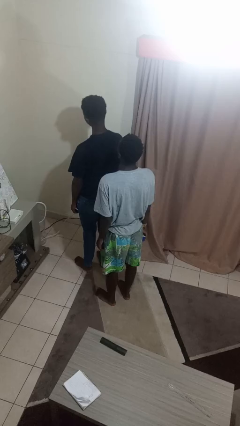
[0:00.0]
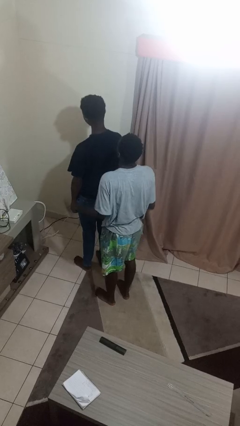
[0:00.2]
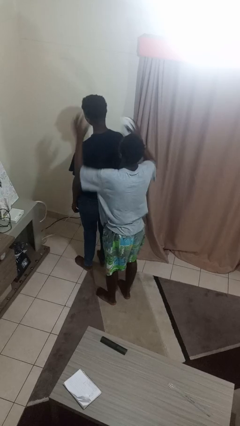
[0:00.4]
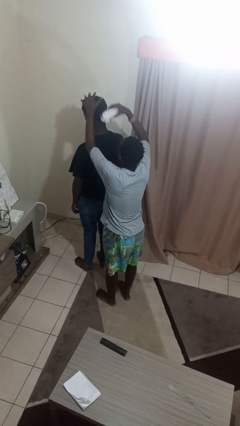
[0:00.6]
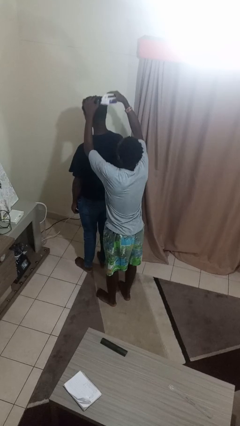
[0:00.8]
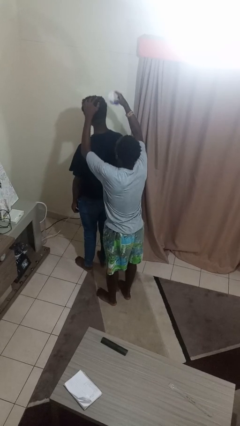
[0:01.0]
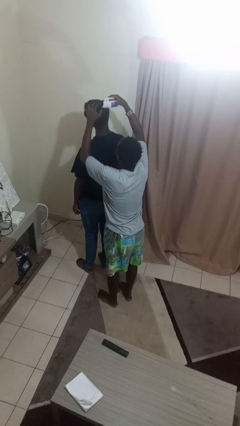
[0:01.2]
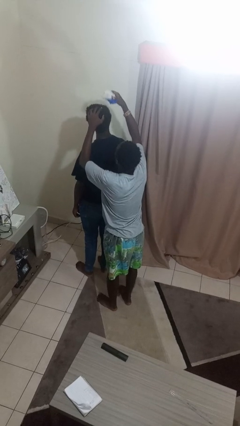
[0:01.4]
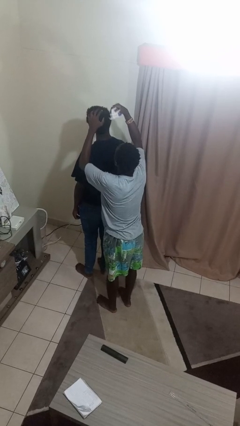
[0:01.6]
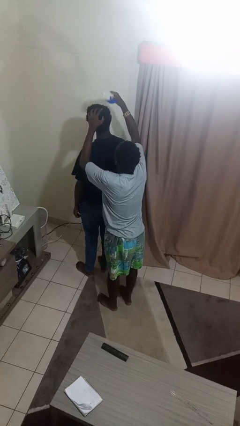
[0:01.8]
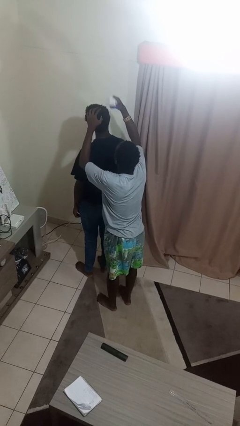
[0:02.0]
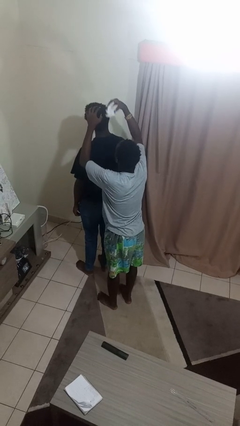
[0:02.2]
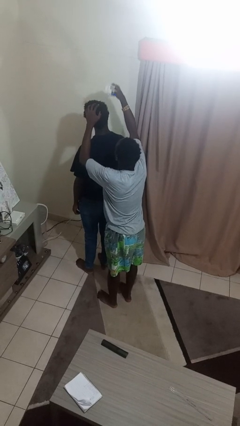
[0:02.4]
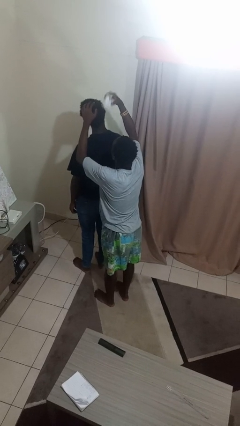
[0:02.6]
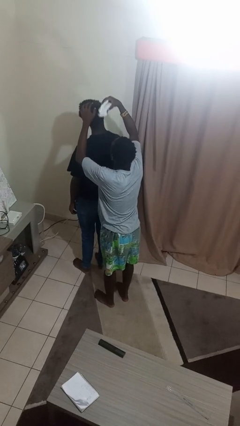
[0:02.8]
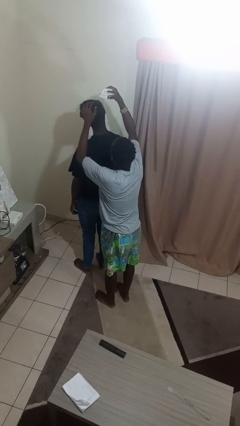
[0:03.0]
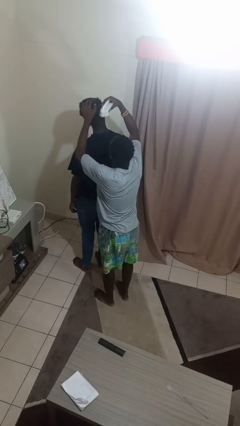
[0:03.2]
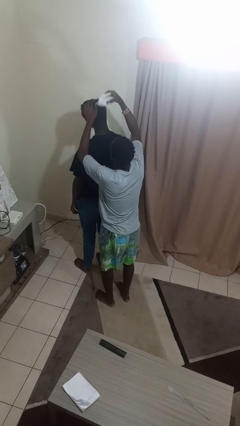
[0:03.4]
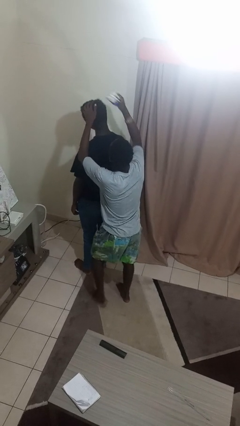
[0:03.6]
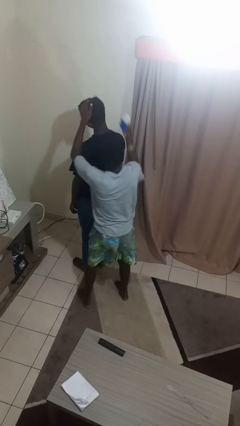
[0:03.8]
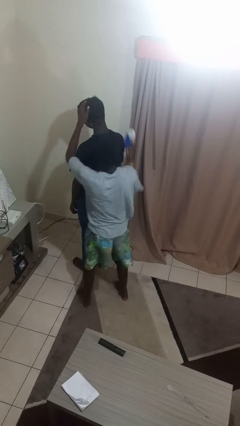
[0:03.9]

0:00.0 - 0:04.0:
person brushes hair of person

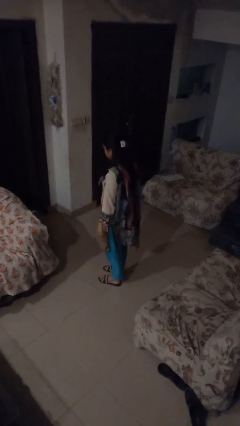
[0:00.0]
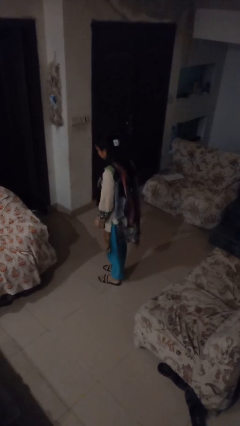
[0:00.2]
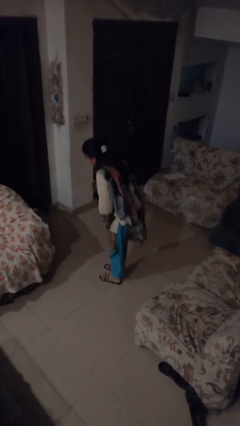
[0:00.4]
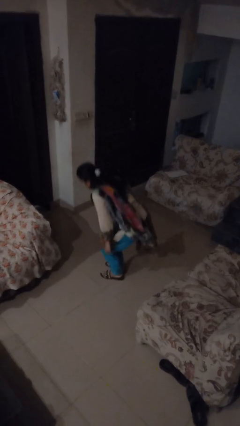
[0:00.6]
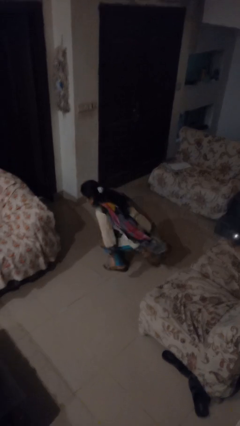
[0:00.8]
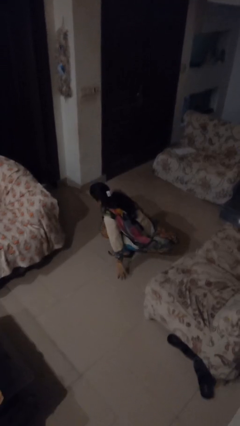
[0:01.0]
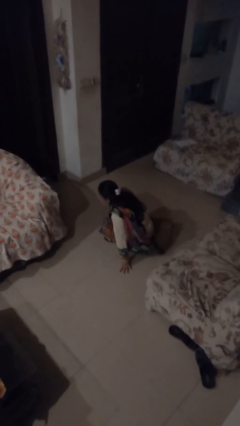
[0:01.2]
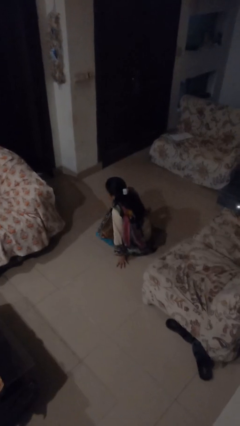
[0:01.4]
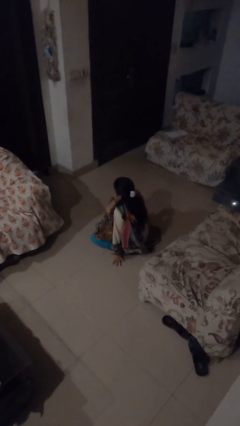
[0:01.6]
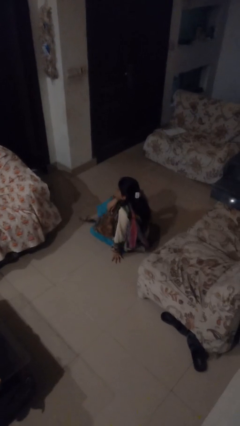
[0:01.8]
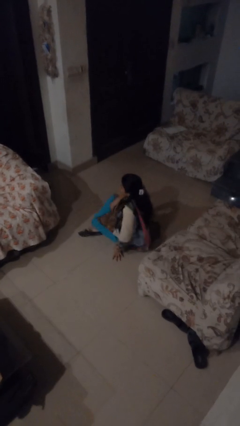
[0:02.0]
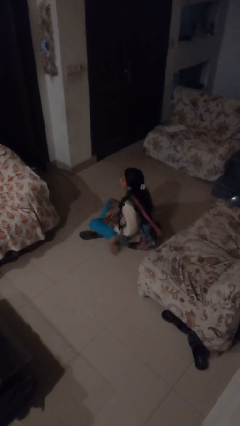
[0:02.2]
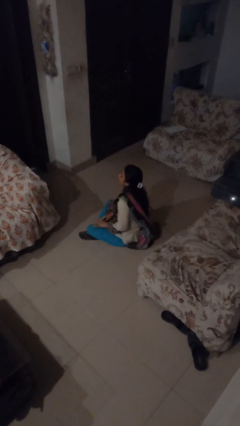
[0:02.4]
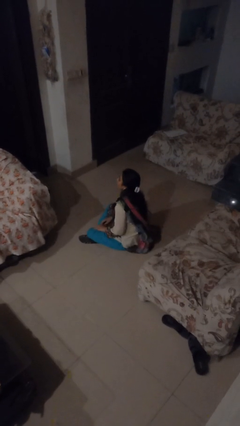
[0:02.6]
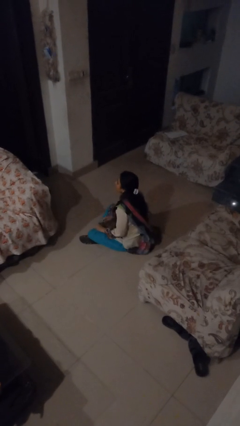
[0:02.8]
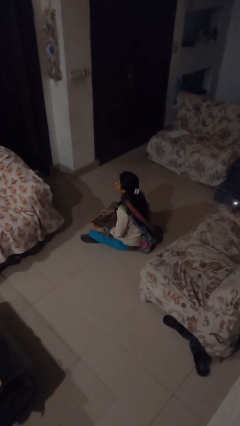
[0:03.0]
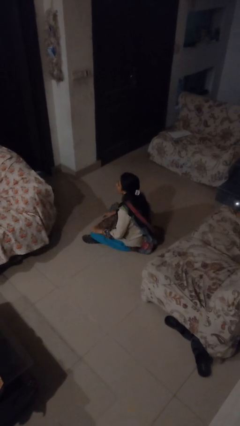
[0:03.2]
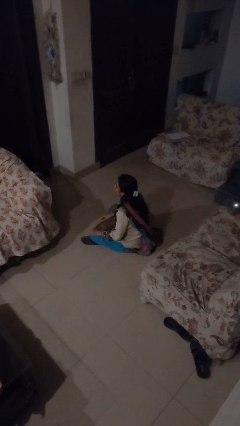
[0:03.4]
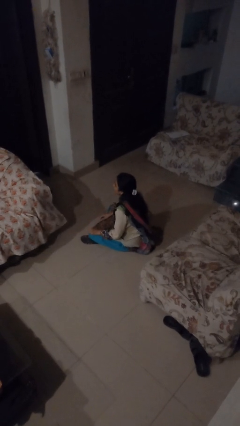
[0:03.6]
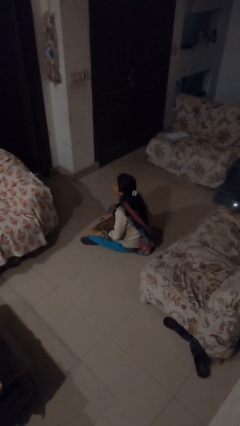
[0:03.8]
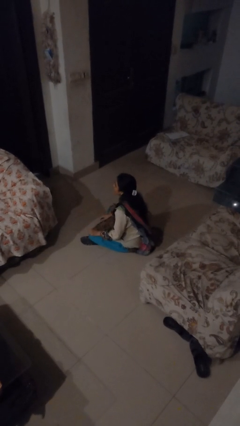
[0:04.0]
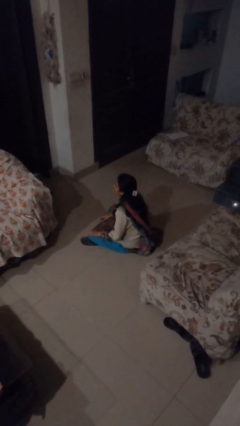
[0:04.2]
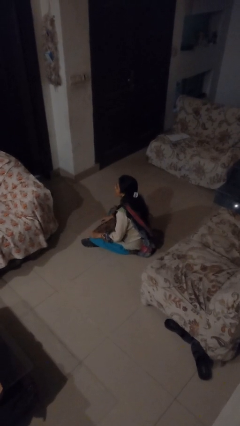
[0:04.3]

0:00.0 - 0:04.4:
person sits crisscross

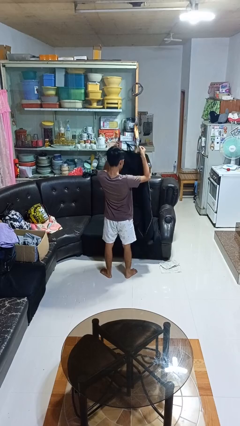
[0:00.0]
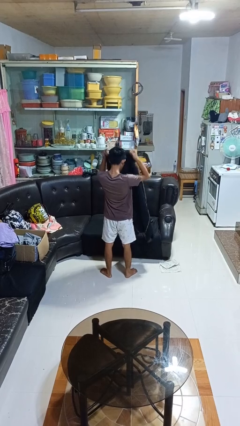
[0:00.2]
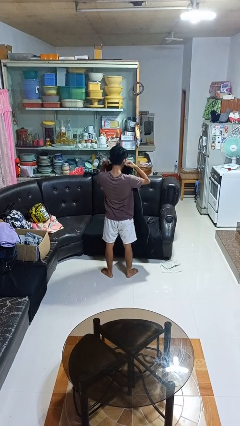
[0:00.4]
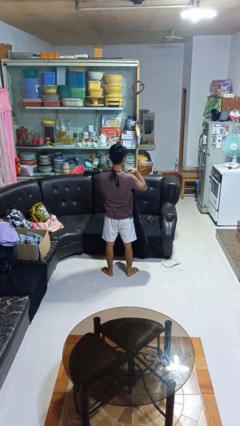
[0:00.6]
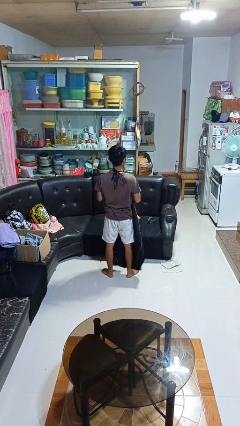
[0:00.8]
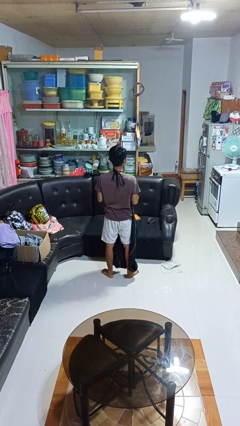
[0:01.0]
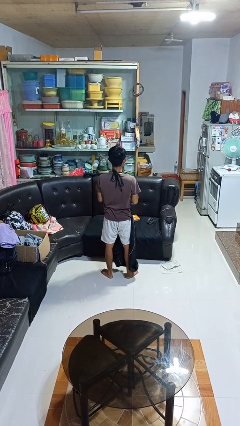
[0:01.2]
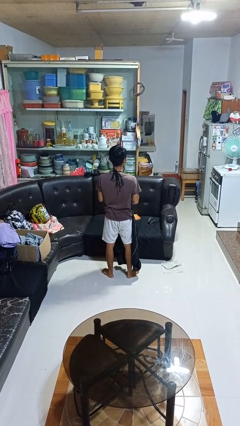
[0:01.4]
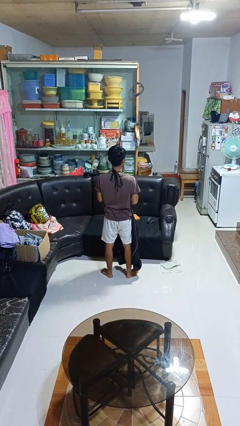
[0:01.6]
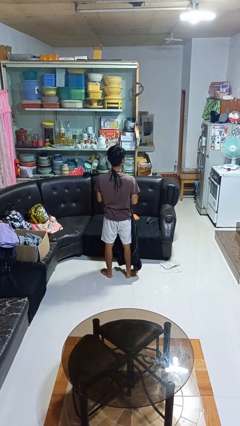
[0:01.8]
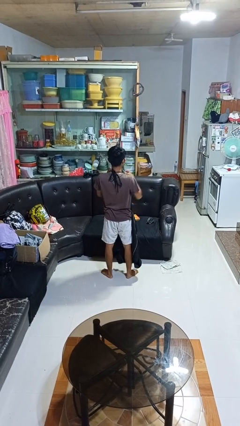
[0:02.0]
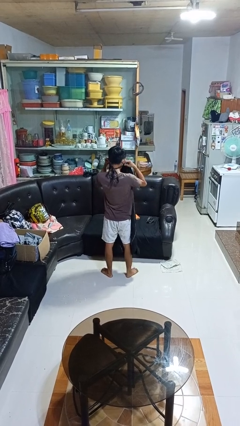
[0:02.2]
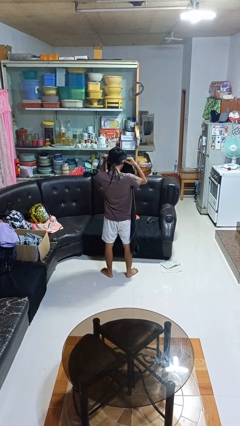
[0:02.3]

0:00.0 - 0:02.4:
person puts on apron

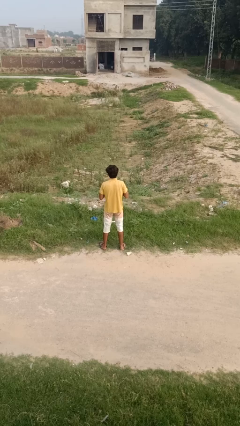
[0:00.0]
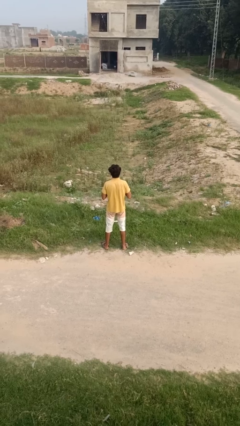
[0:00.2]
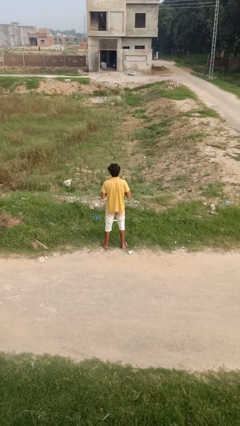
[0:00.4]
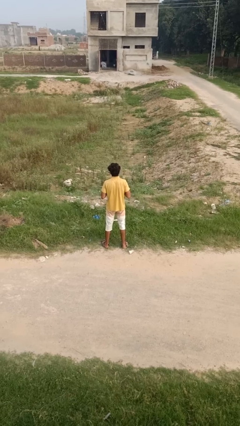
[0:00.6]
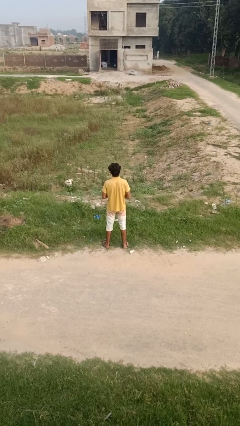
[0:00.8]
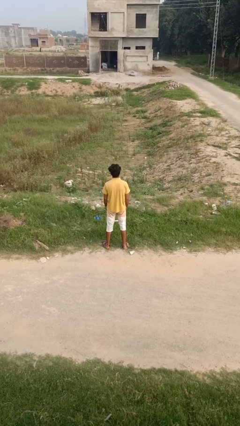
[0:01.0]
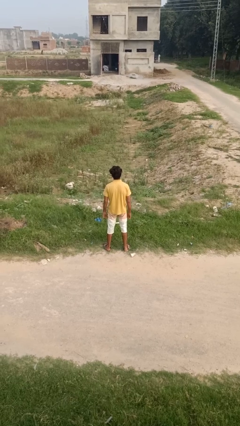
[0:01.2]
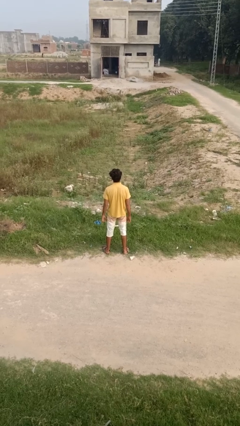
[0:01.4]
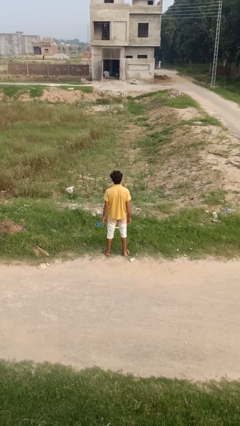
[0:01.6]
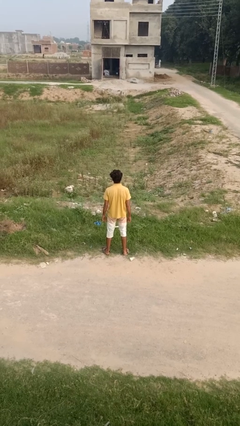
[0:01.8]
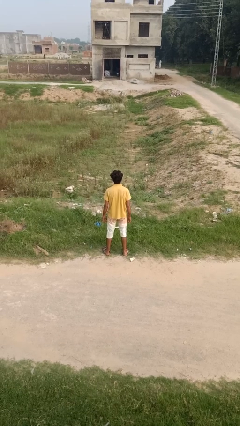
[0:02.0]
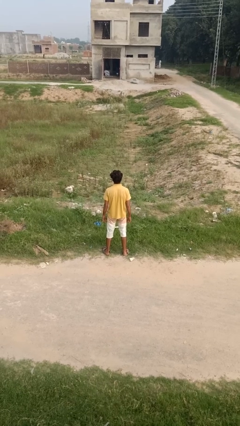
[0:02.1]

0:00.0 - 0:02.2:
person buttons shirt

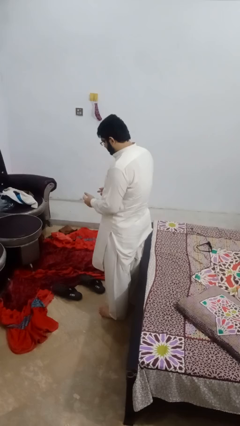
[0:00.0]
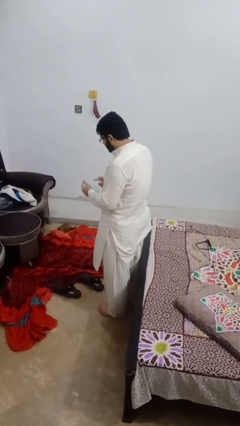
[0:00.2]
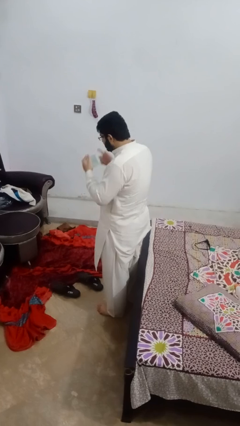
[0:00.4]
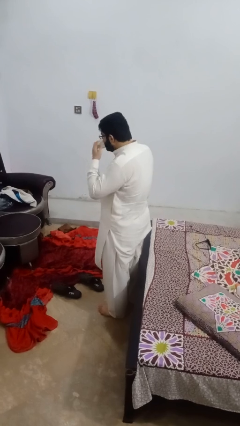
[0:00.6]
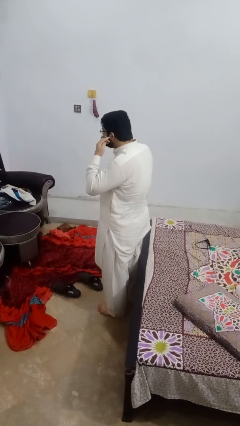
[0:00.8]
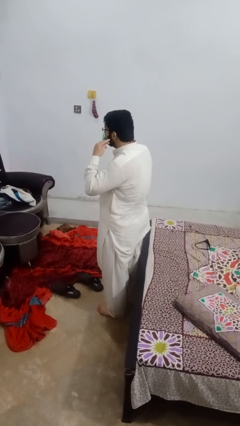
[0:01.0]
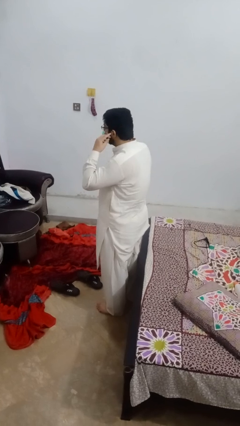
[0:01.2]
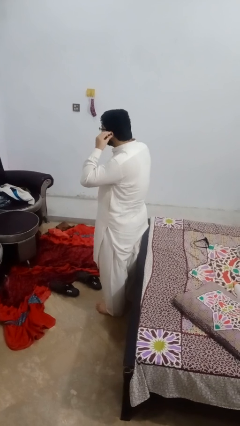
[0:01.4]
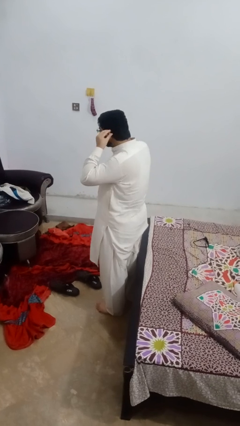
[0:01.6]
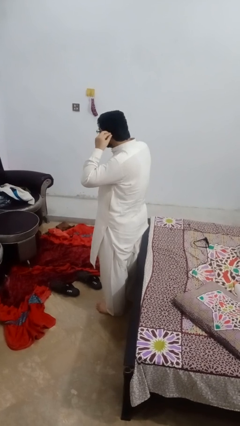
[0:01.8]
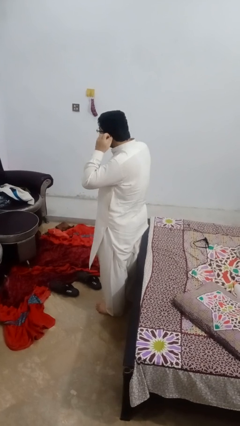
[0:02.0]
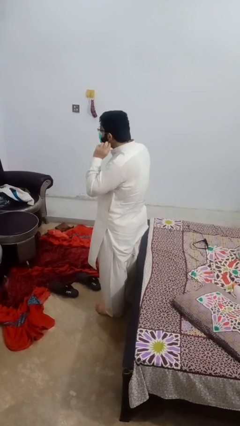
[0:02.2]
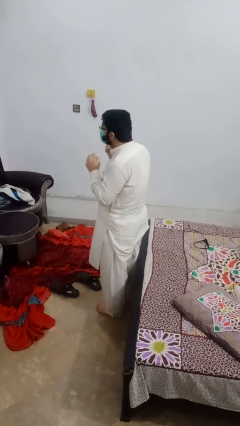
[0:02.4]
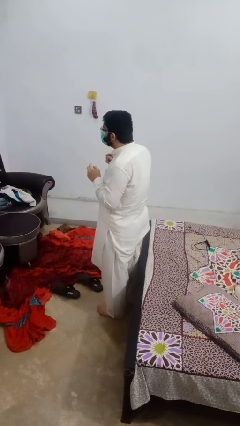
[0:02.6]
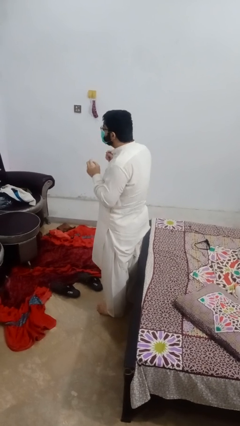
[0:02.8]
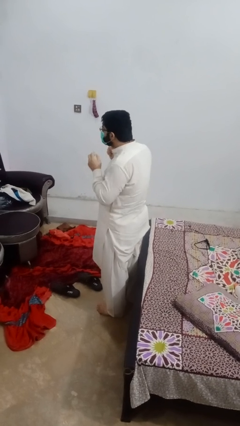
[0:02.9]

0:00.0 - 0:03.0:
person puts on facemask

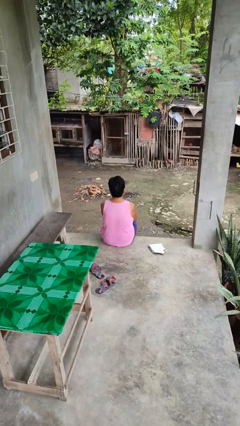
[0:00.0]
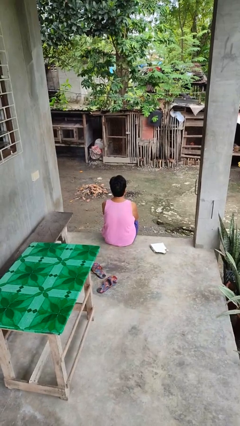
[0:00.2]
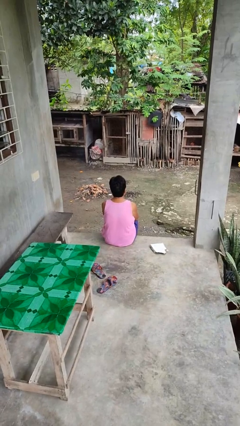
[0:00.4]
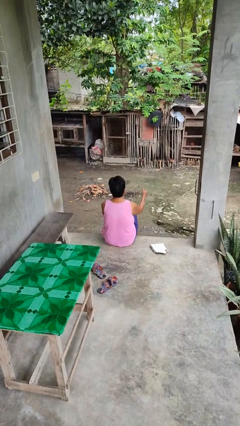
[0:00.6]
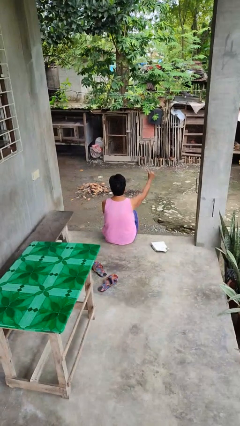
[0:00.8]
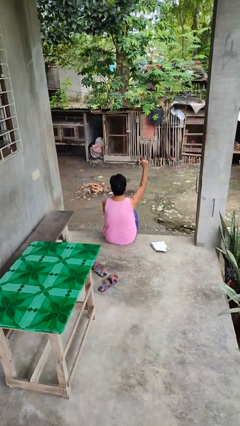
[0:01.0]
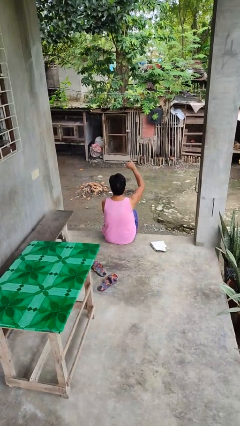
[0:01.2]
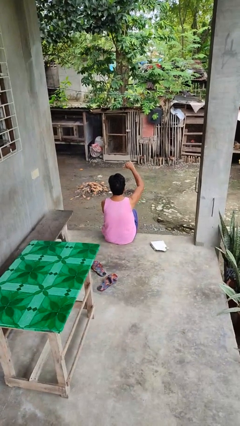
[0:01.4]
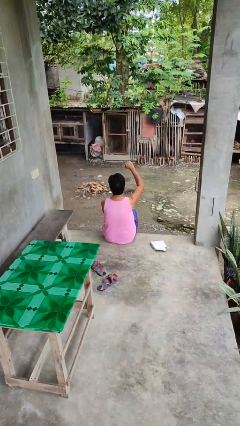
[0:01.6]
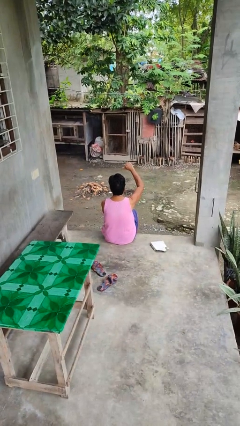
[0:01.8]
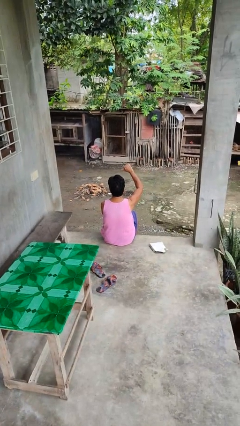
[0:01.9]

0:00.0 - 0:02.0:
person gestures thumbs down
